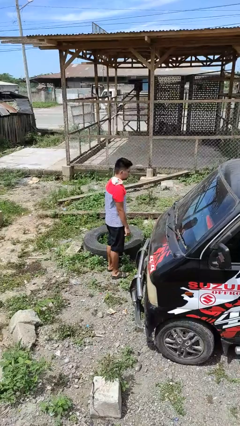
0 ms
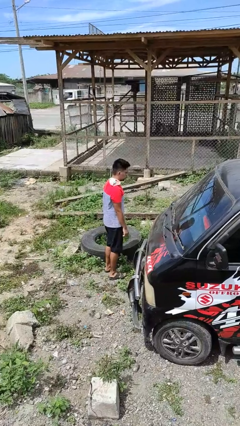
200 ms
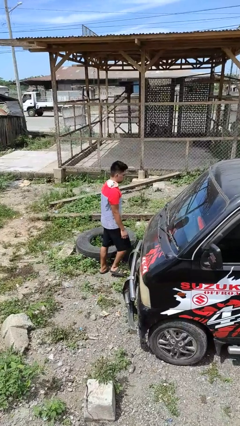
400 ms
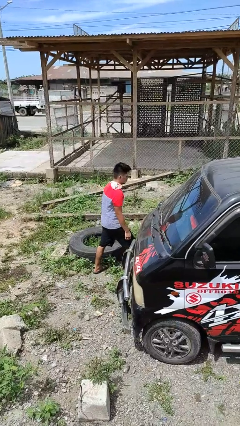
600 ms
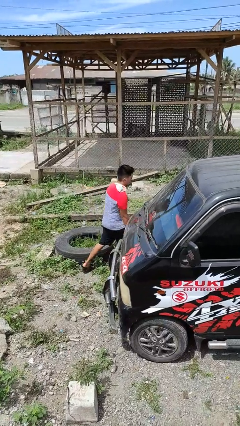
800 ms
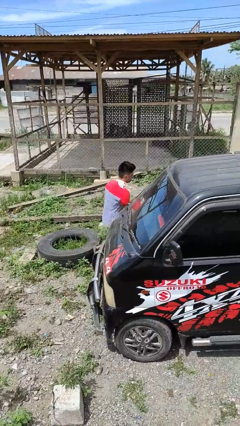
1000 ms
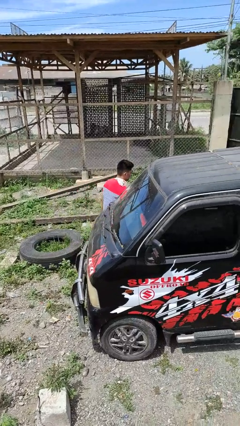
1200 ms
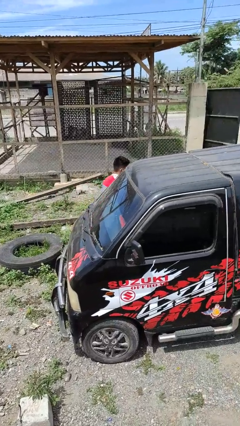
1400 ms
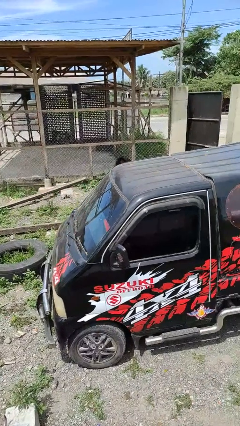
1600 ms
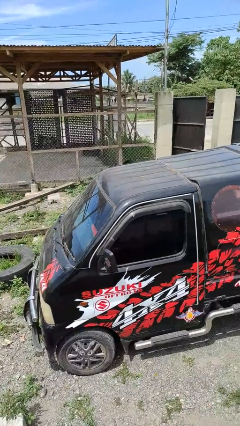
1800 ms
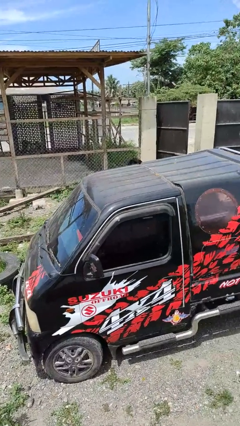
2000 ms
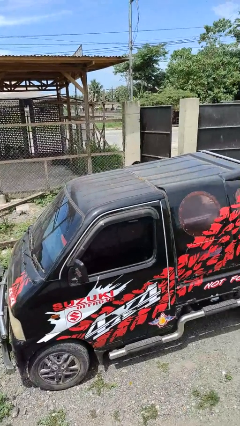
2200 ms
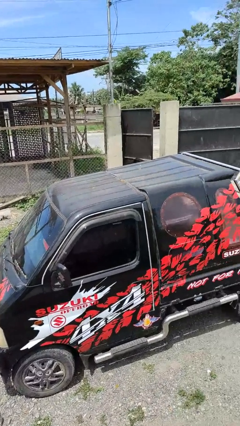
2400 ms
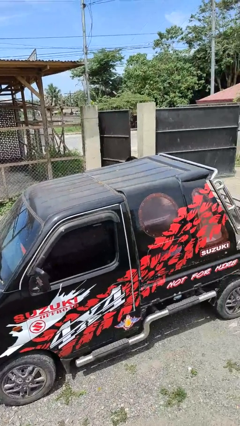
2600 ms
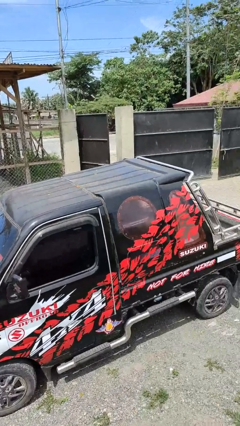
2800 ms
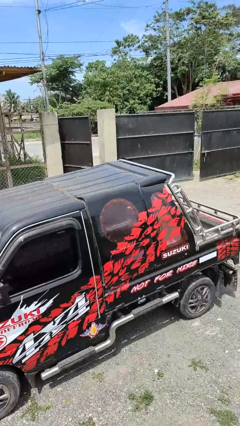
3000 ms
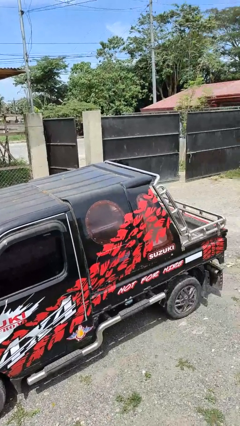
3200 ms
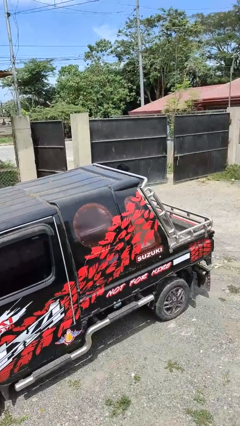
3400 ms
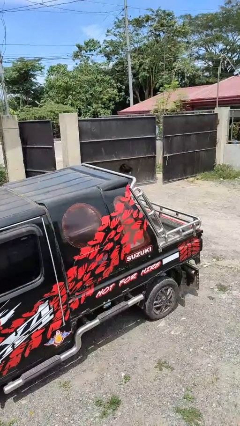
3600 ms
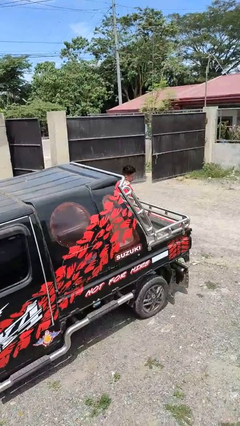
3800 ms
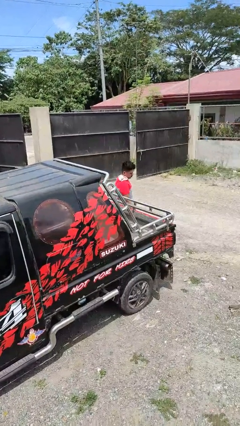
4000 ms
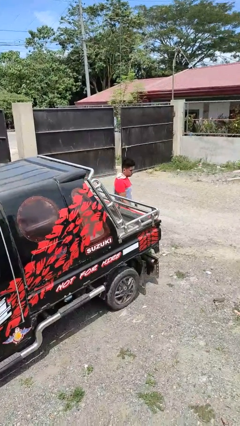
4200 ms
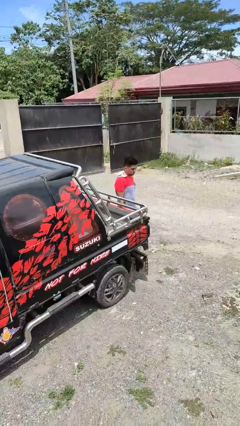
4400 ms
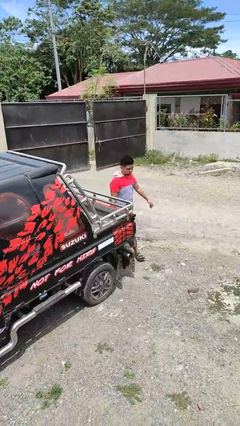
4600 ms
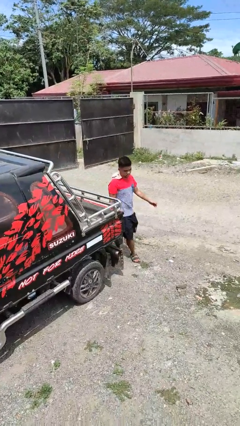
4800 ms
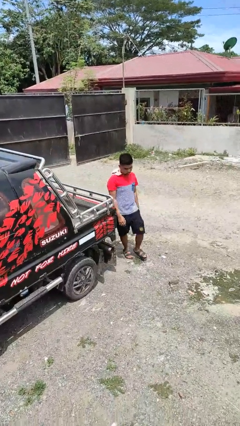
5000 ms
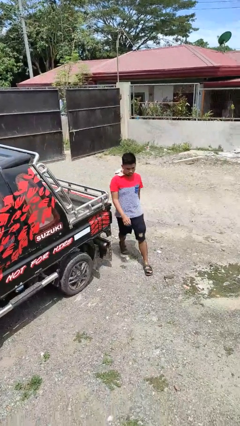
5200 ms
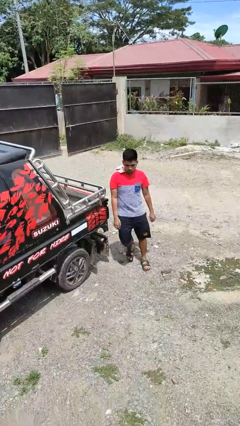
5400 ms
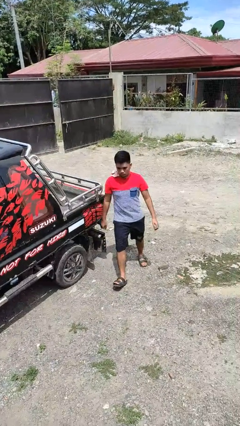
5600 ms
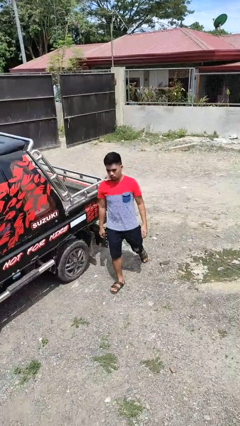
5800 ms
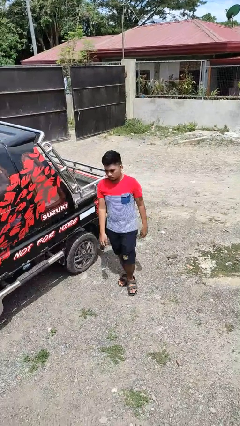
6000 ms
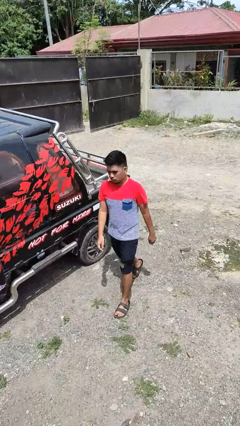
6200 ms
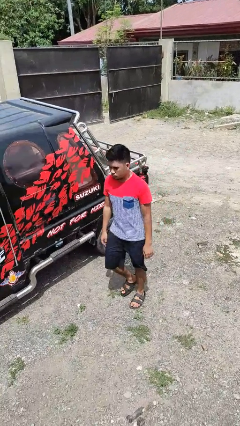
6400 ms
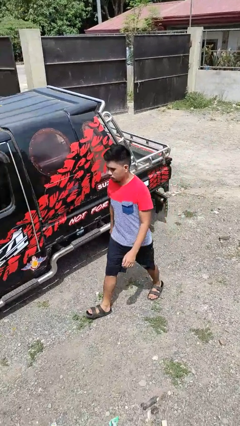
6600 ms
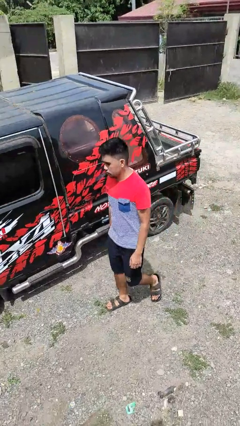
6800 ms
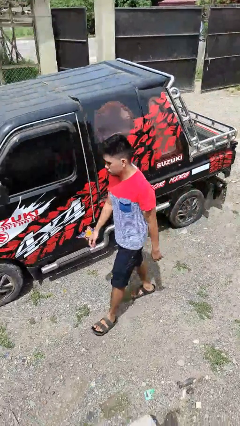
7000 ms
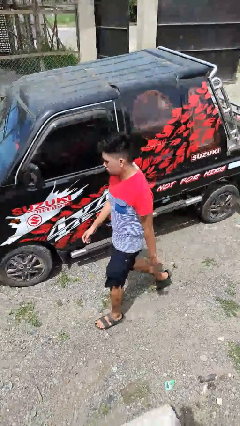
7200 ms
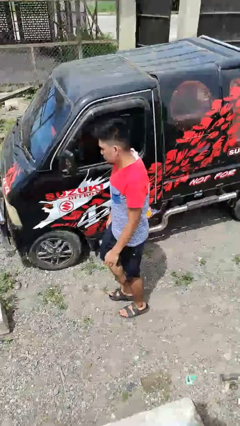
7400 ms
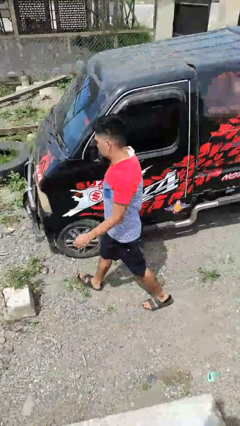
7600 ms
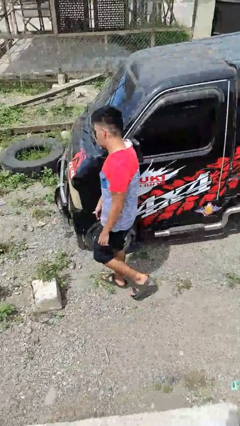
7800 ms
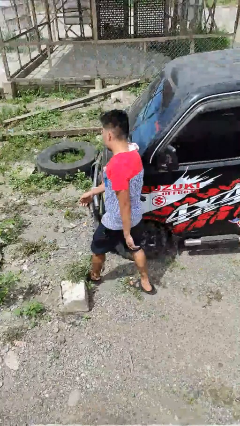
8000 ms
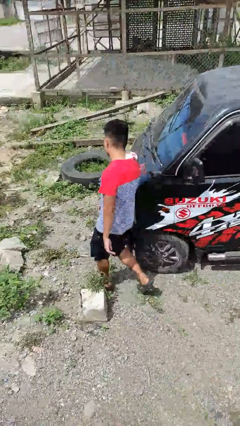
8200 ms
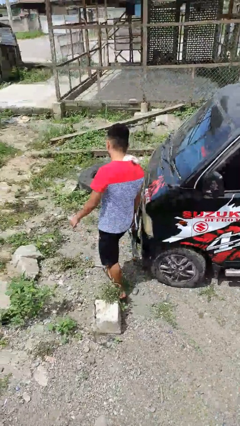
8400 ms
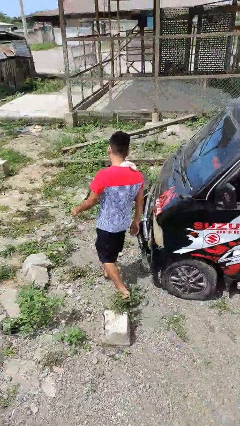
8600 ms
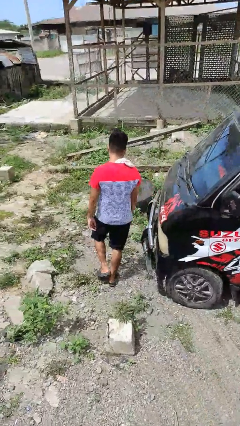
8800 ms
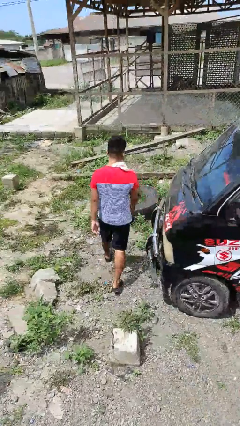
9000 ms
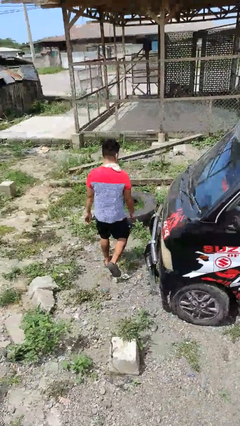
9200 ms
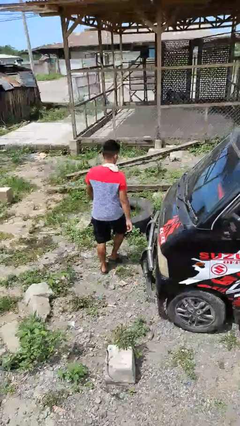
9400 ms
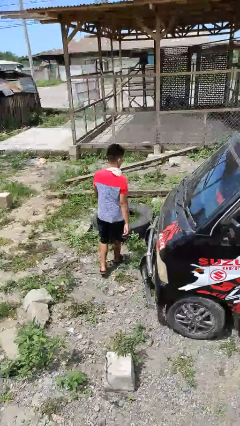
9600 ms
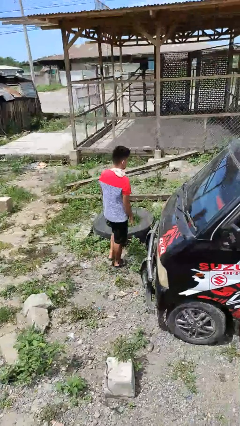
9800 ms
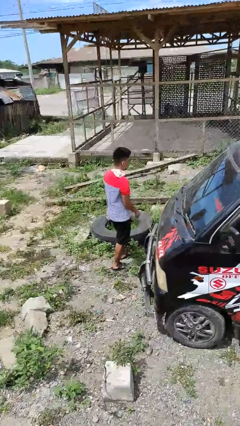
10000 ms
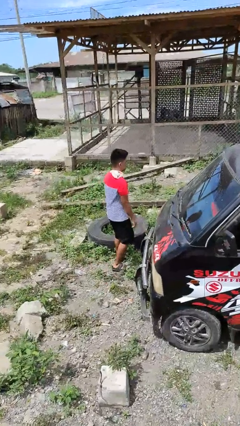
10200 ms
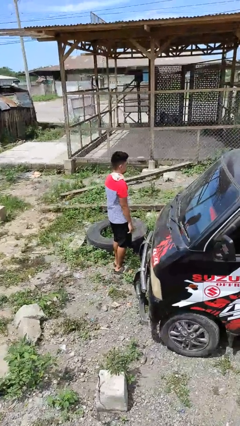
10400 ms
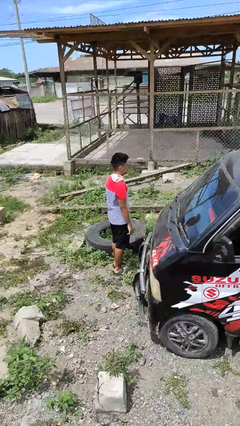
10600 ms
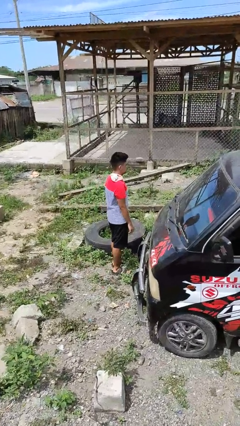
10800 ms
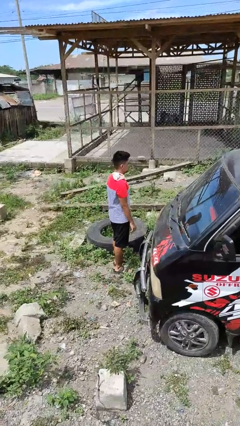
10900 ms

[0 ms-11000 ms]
person walks around car

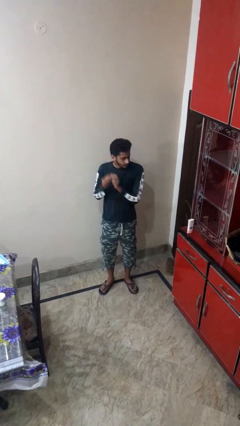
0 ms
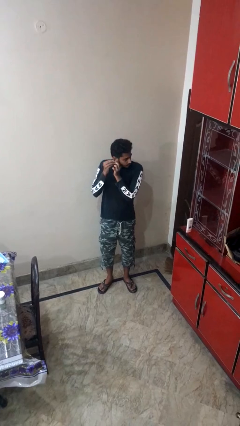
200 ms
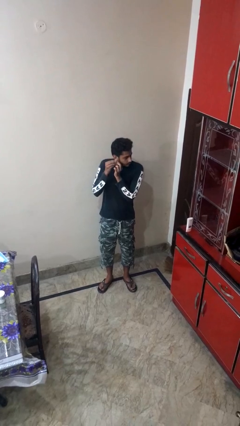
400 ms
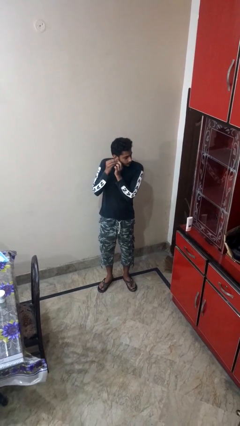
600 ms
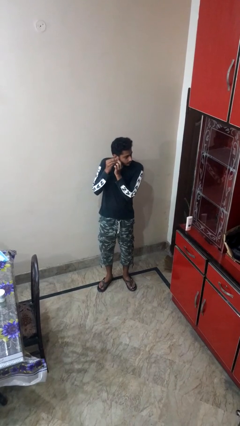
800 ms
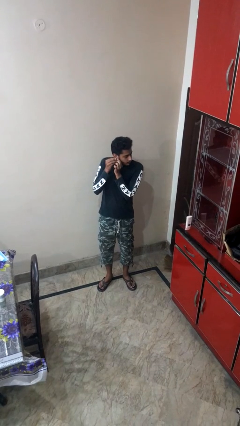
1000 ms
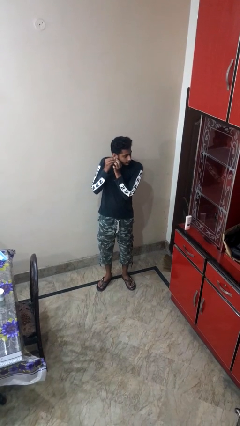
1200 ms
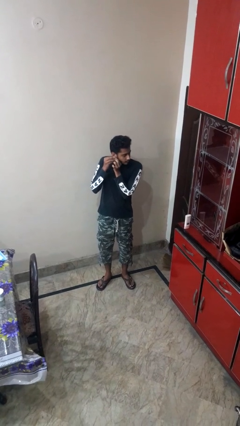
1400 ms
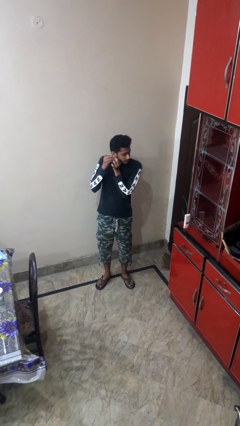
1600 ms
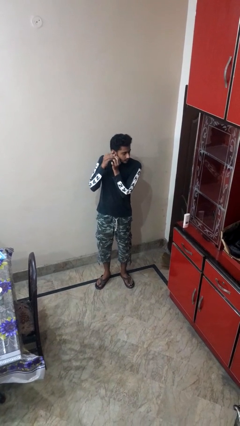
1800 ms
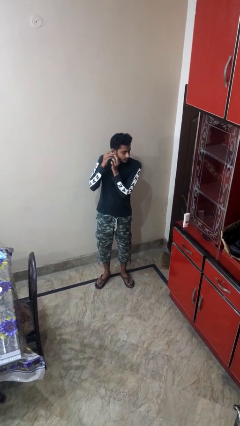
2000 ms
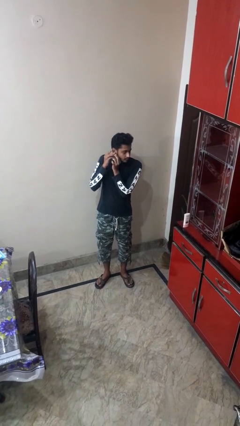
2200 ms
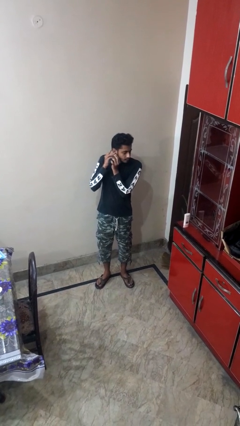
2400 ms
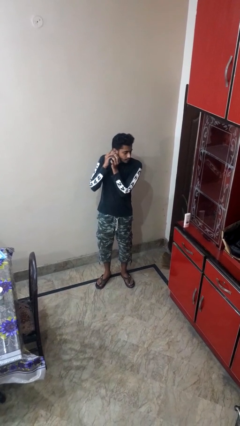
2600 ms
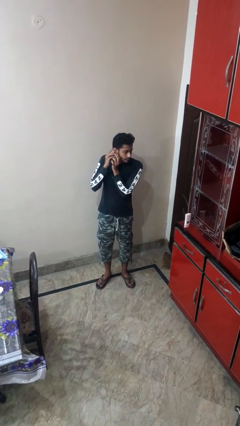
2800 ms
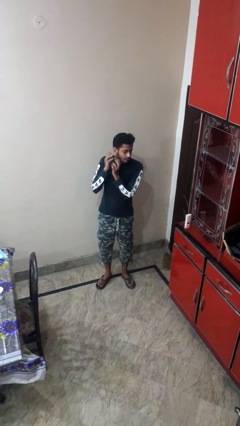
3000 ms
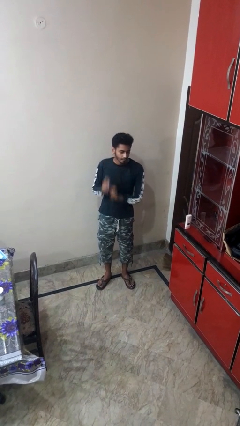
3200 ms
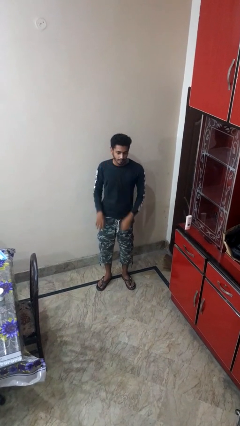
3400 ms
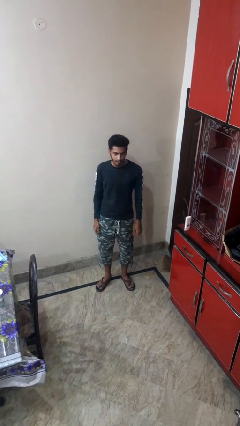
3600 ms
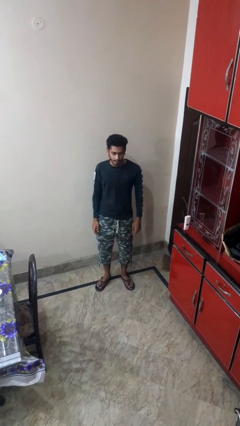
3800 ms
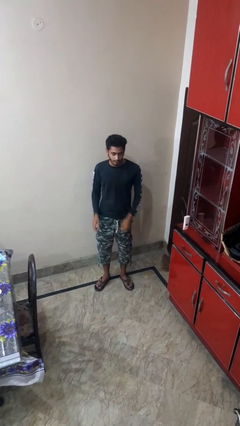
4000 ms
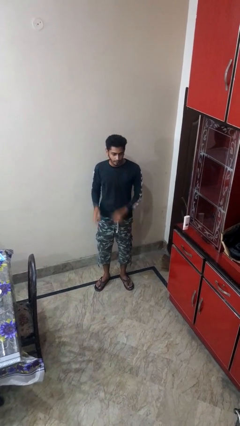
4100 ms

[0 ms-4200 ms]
person puts on earrings

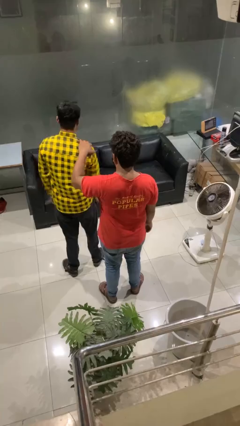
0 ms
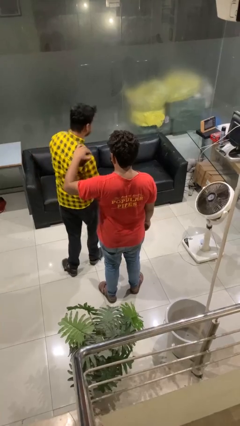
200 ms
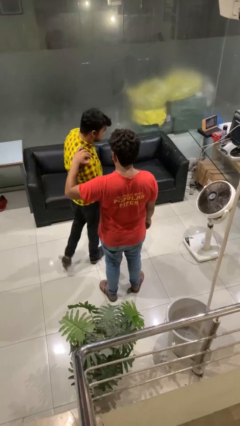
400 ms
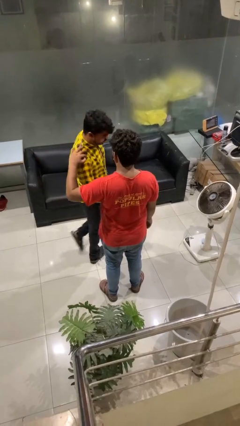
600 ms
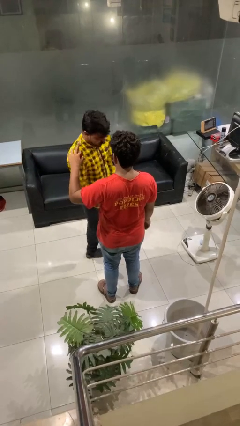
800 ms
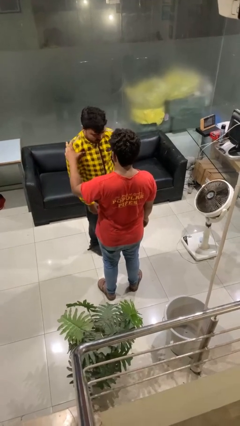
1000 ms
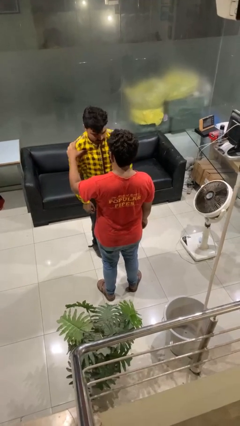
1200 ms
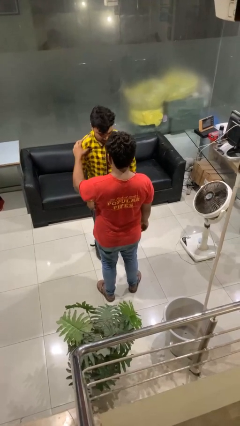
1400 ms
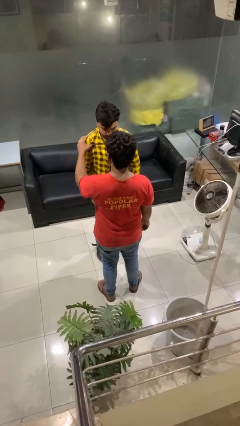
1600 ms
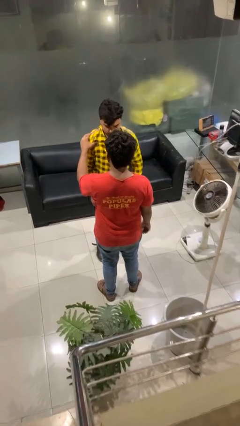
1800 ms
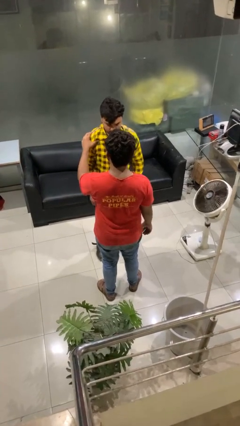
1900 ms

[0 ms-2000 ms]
person spins person around

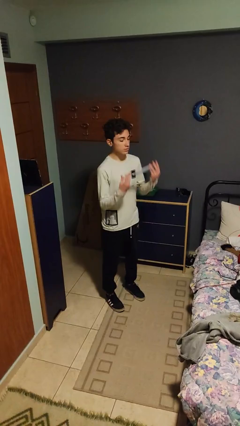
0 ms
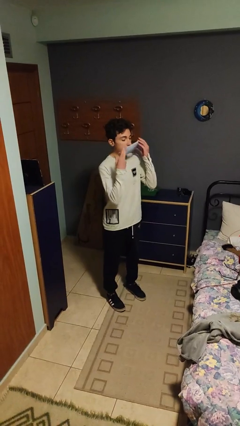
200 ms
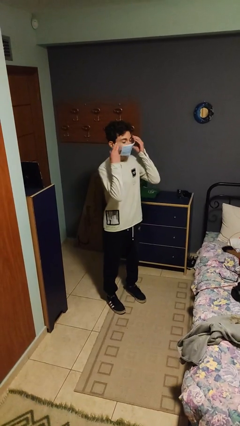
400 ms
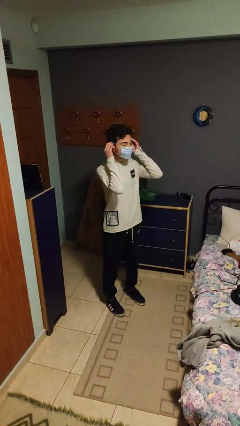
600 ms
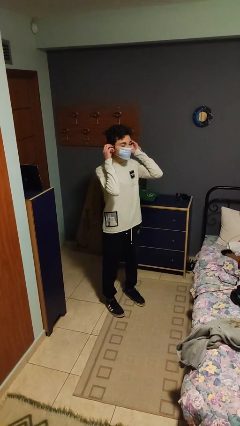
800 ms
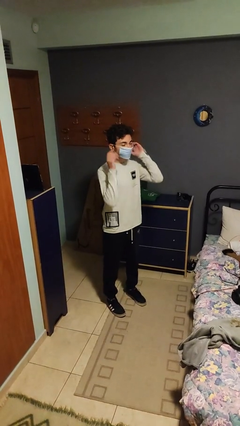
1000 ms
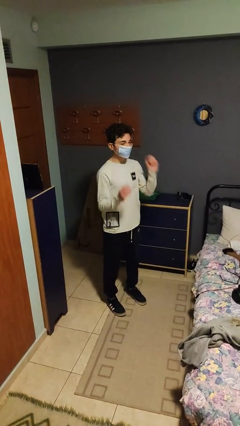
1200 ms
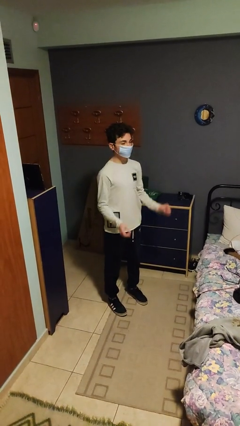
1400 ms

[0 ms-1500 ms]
person puts on facemask
